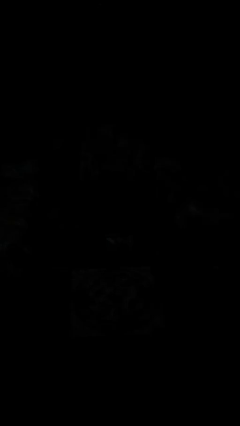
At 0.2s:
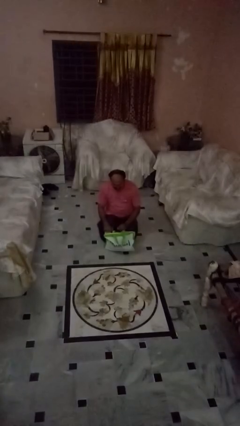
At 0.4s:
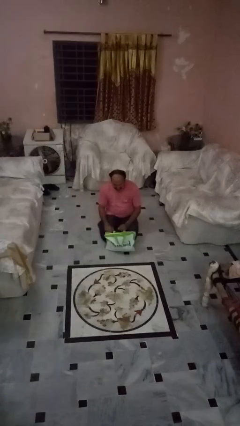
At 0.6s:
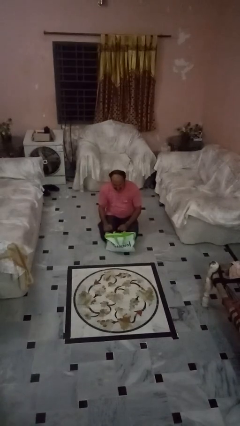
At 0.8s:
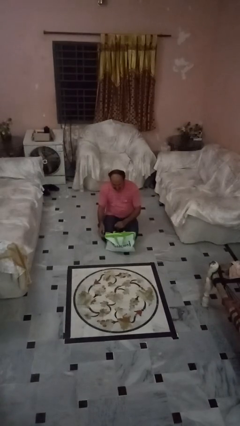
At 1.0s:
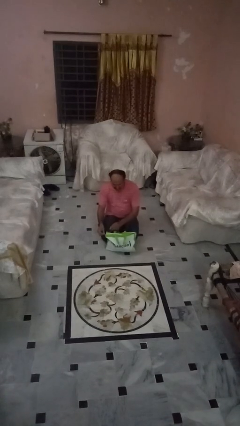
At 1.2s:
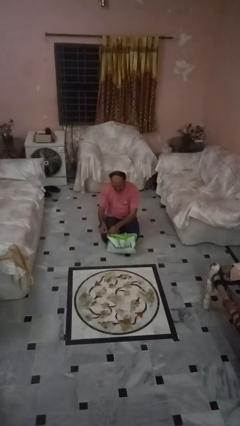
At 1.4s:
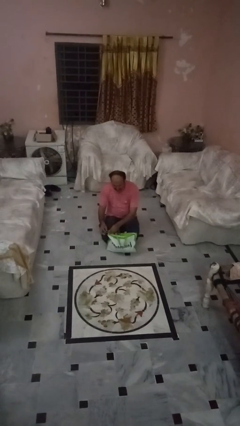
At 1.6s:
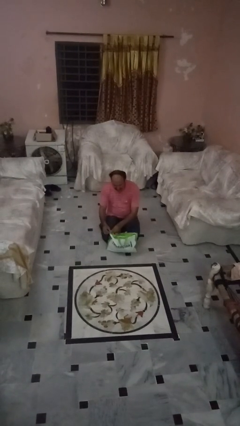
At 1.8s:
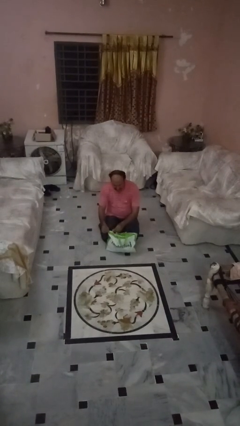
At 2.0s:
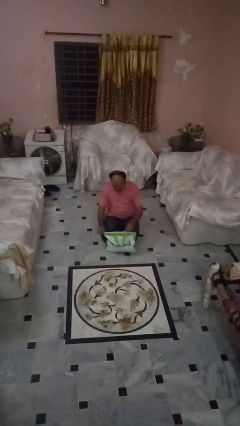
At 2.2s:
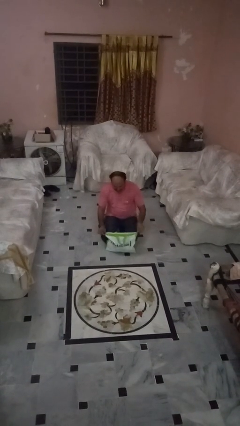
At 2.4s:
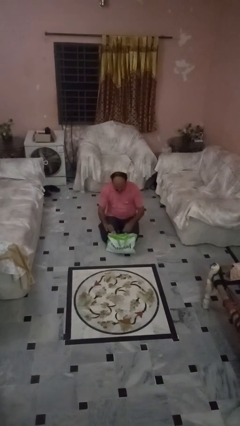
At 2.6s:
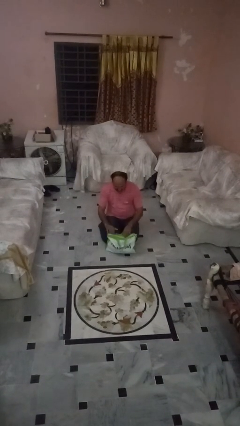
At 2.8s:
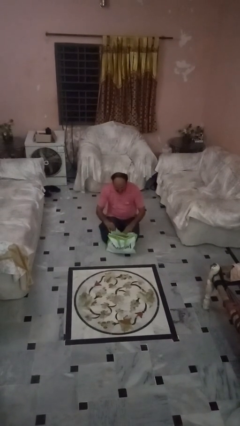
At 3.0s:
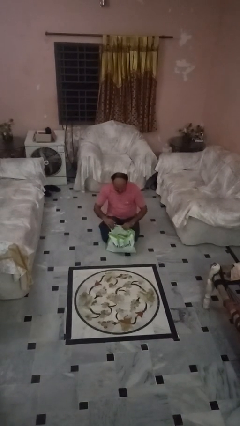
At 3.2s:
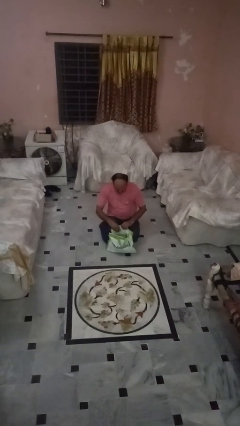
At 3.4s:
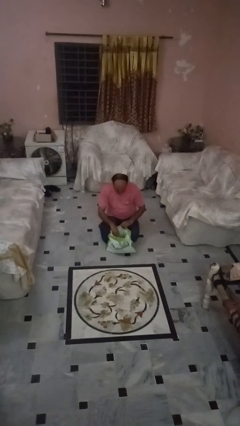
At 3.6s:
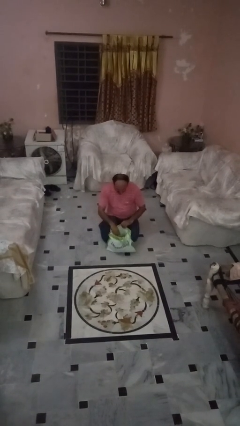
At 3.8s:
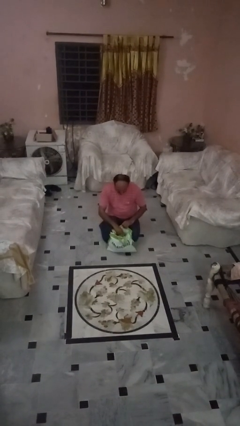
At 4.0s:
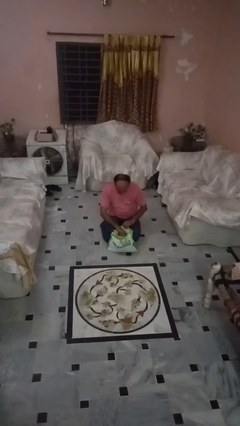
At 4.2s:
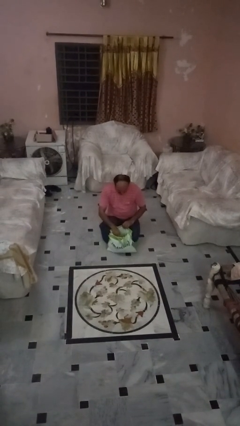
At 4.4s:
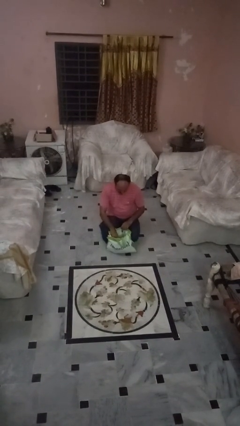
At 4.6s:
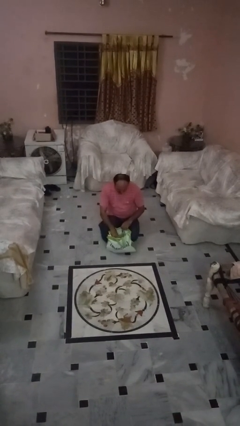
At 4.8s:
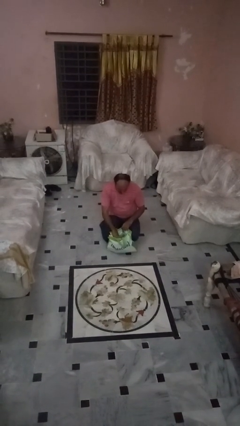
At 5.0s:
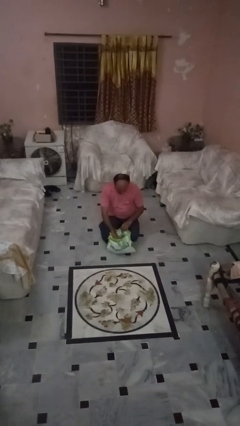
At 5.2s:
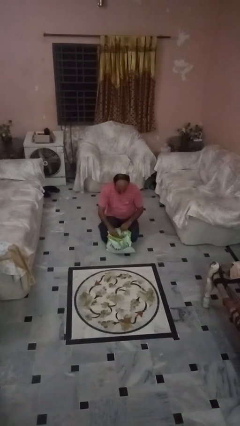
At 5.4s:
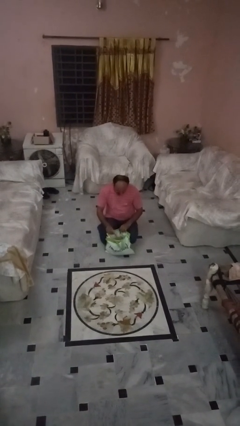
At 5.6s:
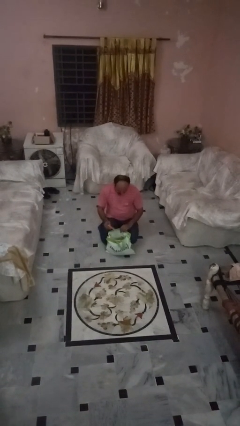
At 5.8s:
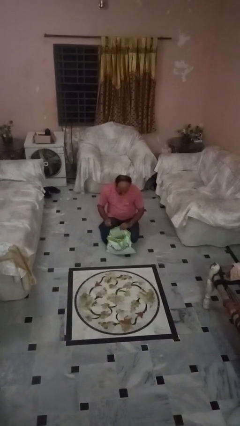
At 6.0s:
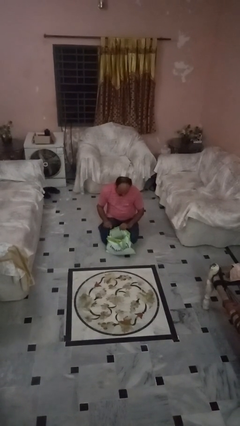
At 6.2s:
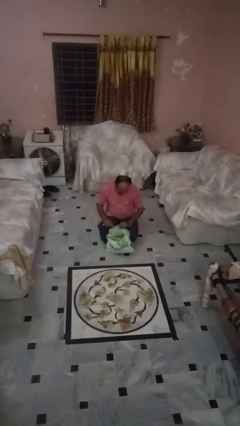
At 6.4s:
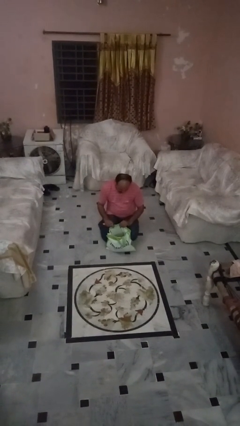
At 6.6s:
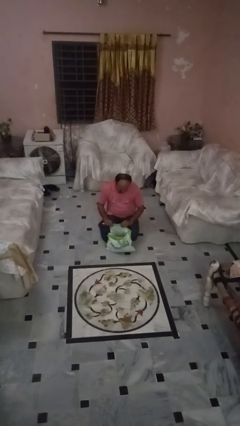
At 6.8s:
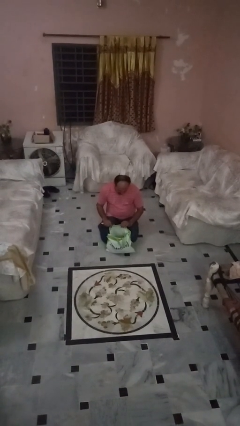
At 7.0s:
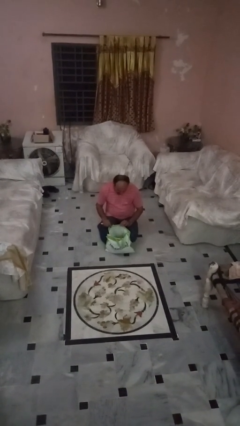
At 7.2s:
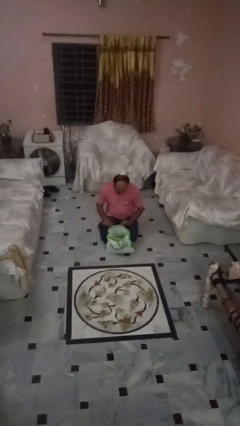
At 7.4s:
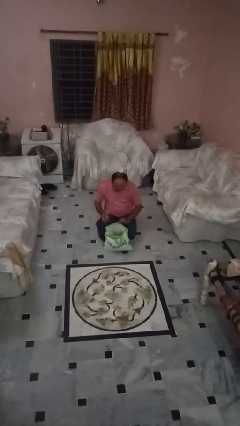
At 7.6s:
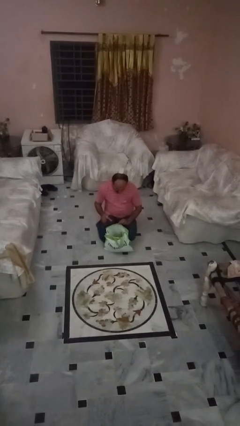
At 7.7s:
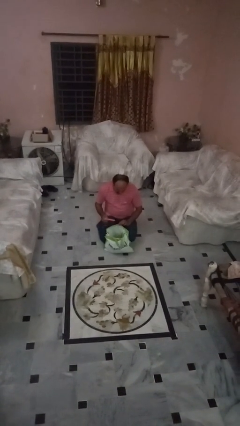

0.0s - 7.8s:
person takes object from bag

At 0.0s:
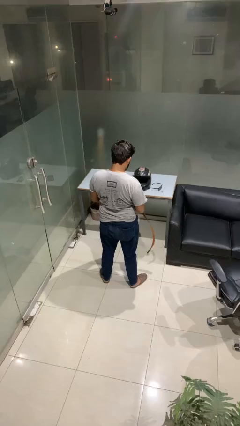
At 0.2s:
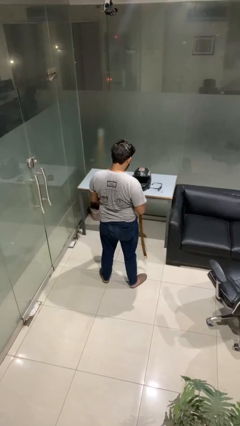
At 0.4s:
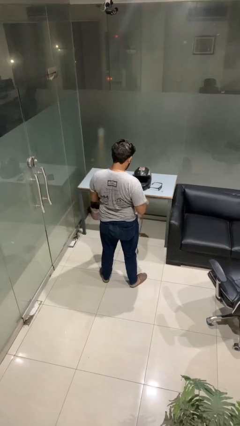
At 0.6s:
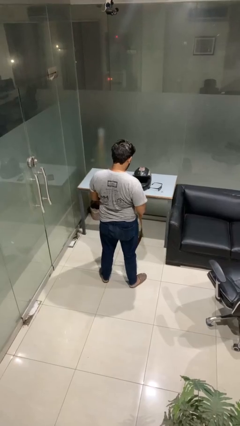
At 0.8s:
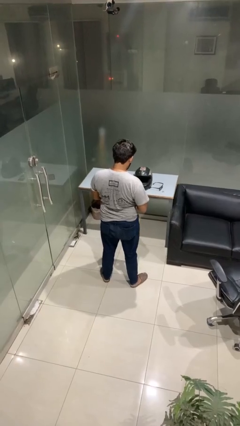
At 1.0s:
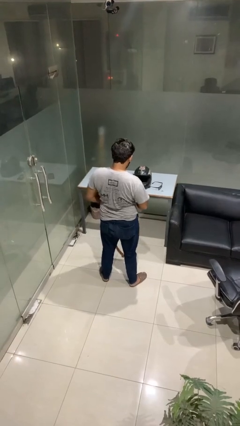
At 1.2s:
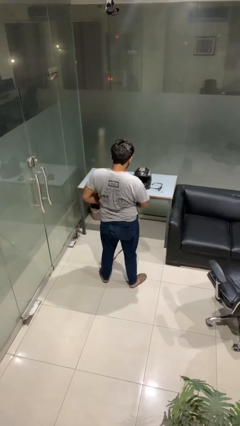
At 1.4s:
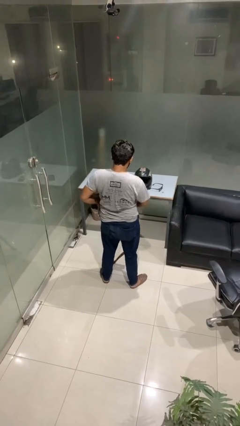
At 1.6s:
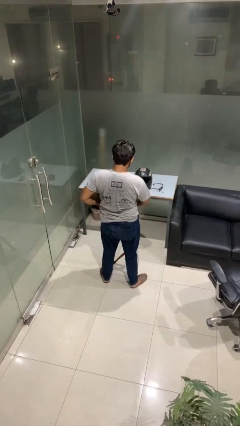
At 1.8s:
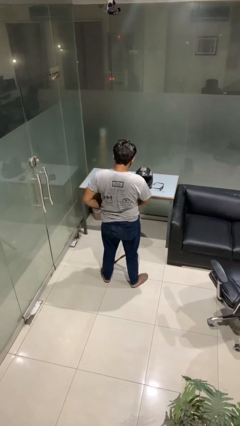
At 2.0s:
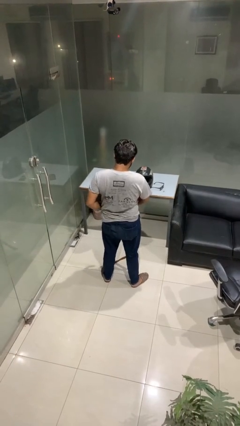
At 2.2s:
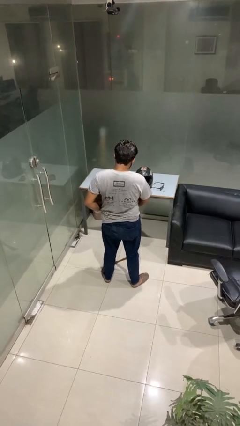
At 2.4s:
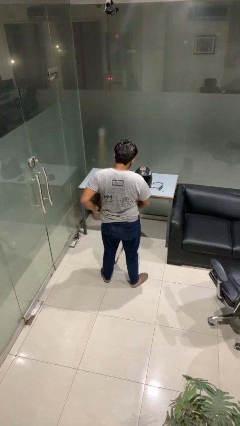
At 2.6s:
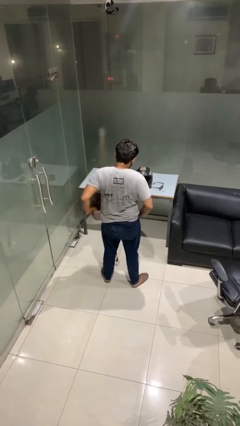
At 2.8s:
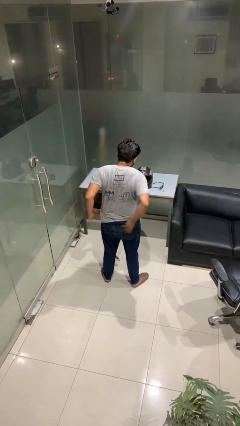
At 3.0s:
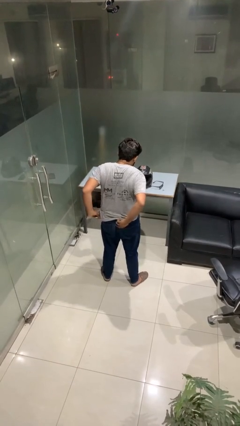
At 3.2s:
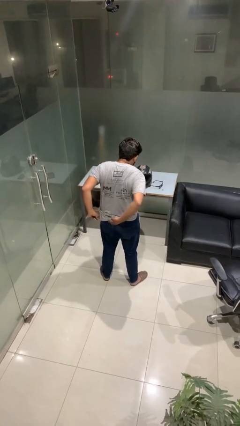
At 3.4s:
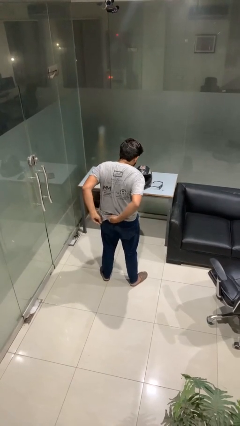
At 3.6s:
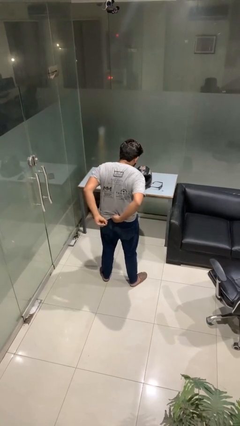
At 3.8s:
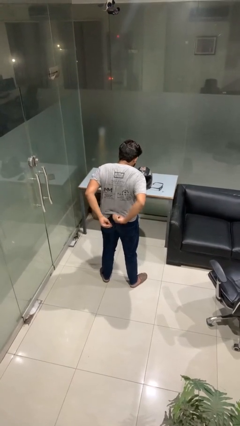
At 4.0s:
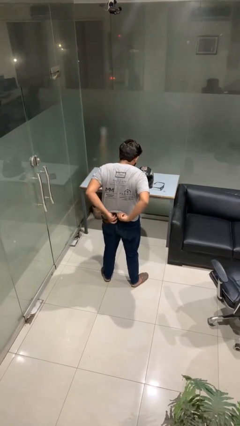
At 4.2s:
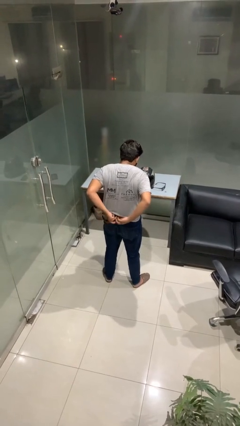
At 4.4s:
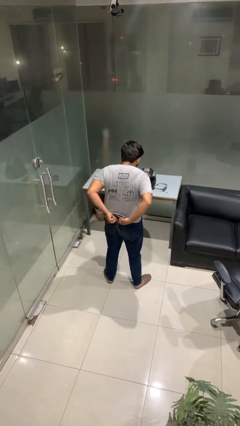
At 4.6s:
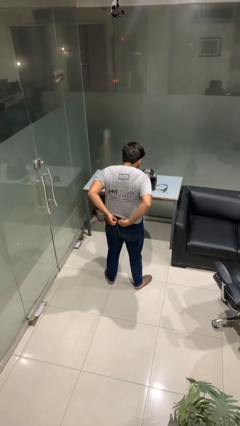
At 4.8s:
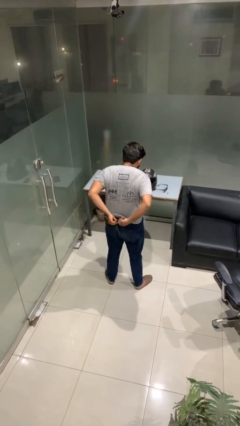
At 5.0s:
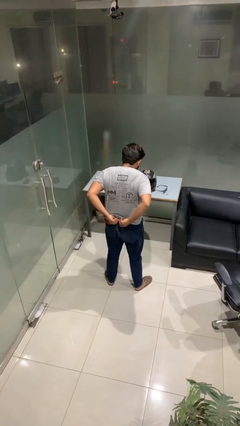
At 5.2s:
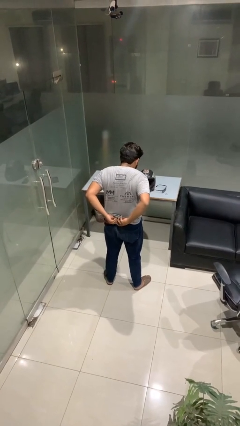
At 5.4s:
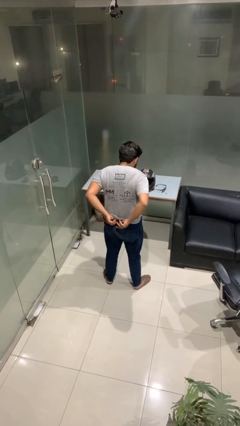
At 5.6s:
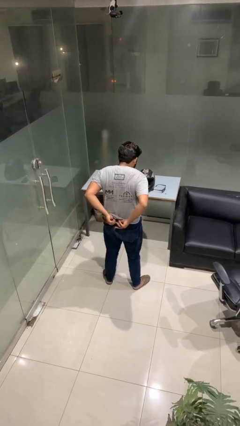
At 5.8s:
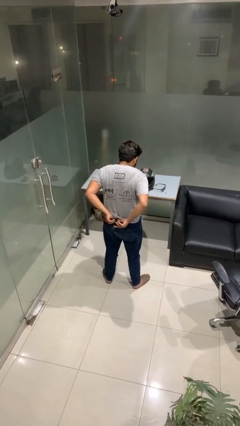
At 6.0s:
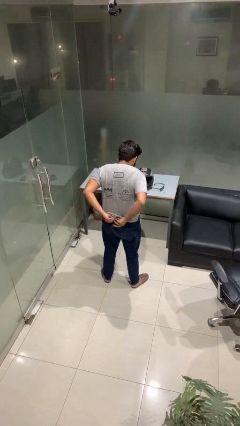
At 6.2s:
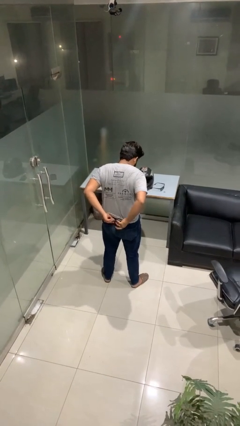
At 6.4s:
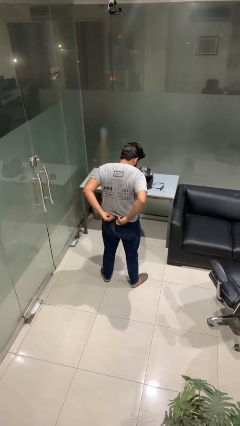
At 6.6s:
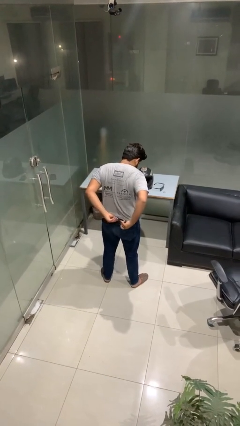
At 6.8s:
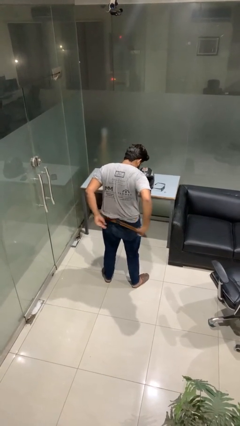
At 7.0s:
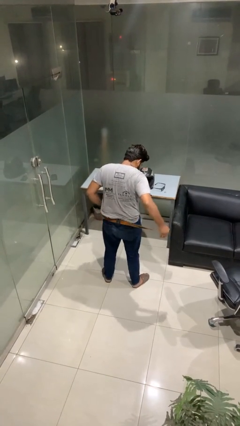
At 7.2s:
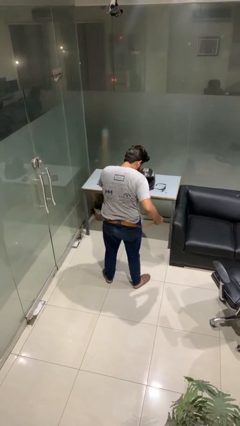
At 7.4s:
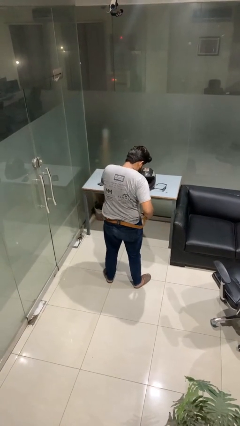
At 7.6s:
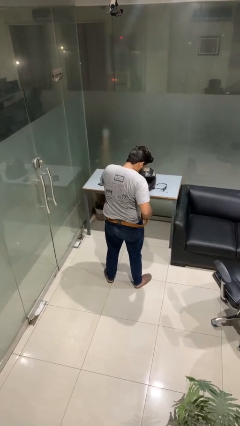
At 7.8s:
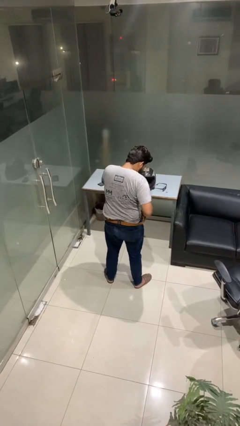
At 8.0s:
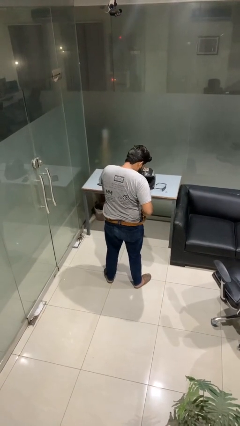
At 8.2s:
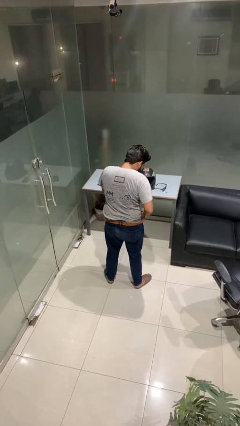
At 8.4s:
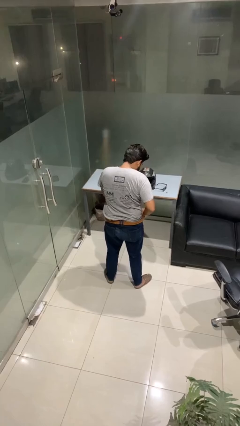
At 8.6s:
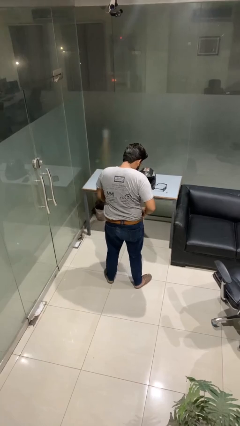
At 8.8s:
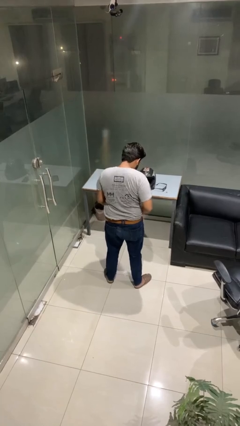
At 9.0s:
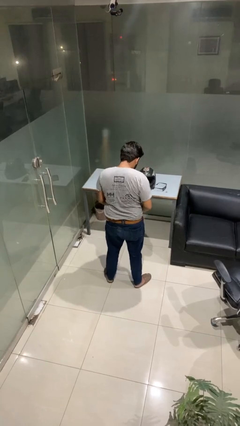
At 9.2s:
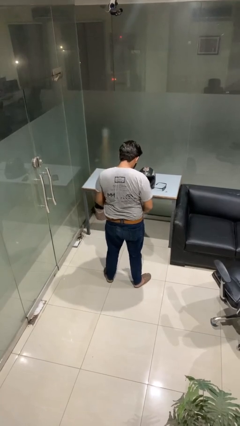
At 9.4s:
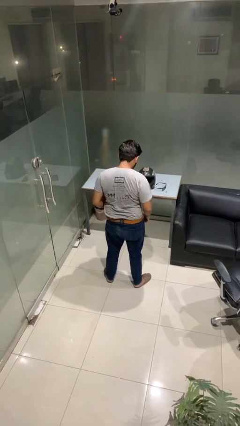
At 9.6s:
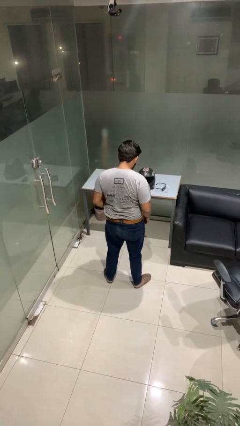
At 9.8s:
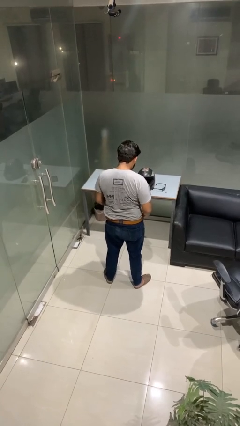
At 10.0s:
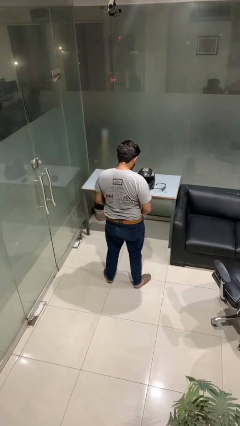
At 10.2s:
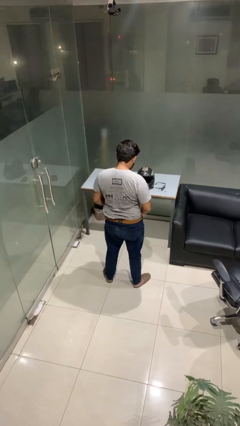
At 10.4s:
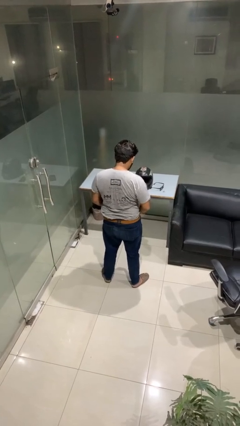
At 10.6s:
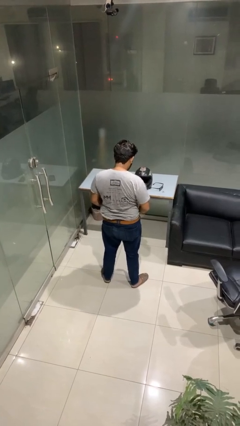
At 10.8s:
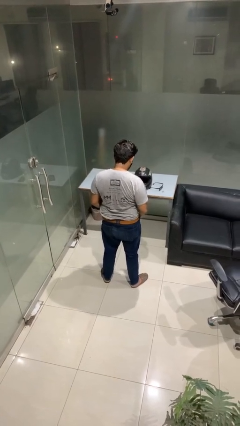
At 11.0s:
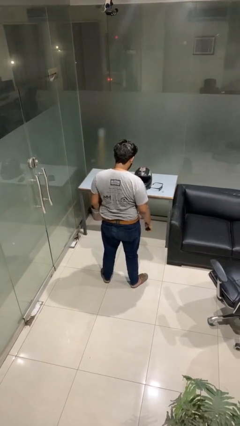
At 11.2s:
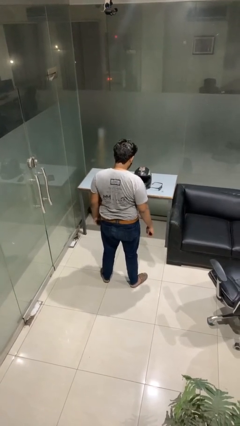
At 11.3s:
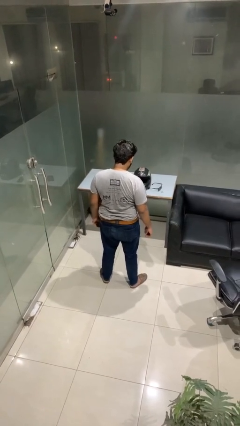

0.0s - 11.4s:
person puts on belt
